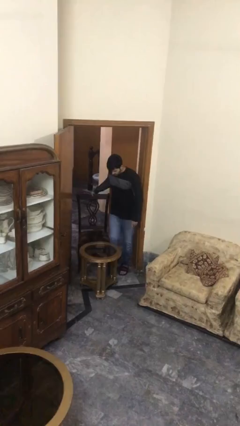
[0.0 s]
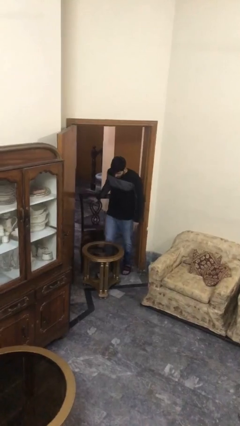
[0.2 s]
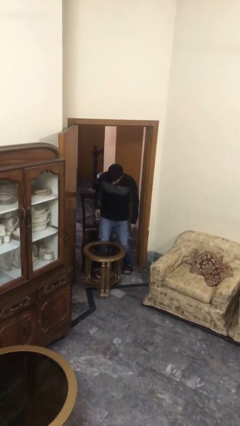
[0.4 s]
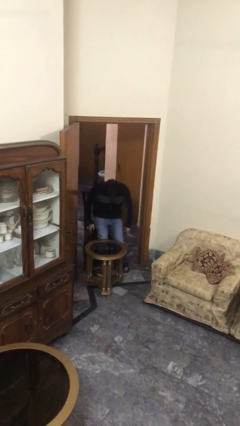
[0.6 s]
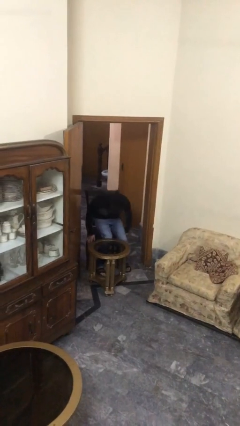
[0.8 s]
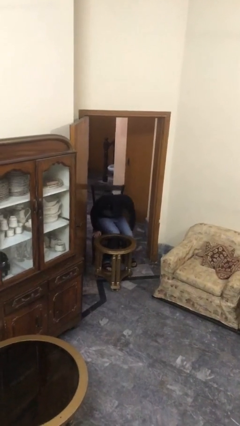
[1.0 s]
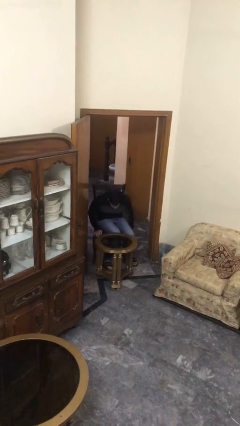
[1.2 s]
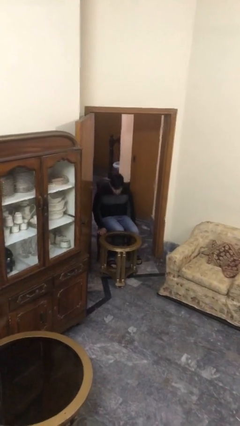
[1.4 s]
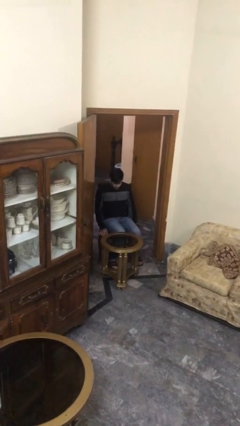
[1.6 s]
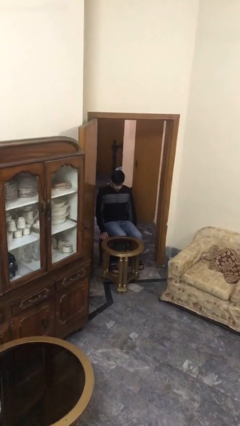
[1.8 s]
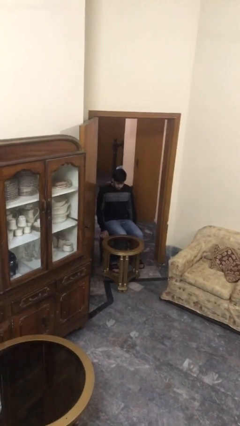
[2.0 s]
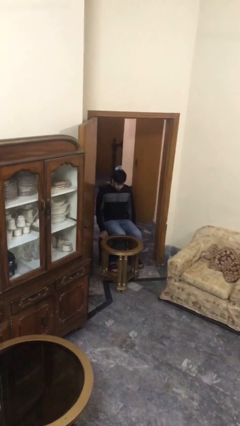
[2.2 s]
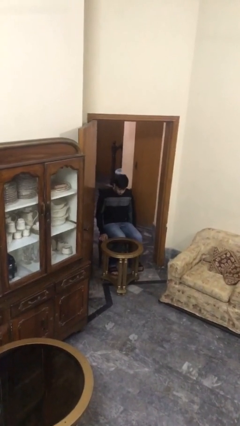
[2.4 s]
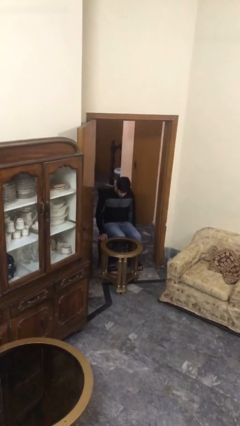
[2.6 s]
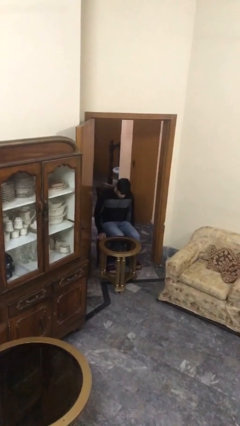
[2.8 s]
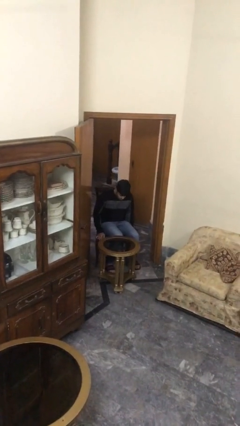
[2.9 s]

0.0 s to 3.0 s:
person sits down

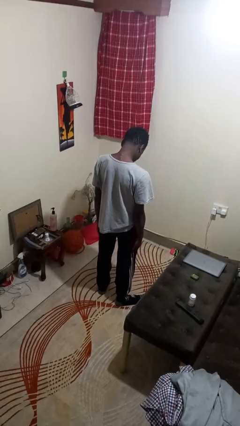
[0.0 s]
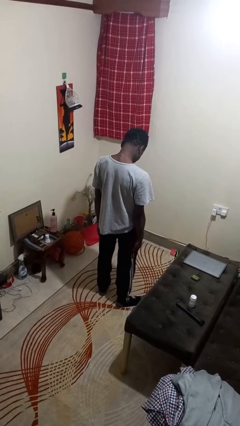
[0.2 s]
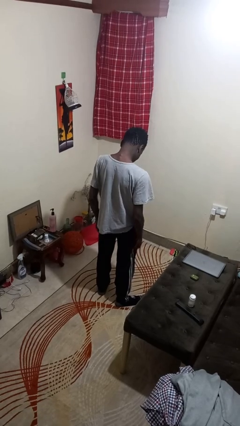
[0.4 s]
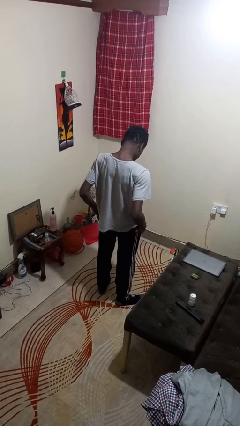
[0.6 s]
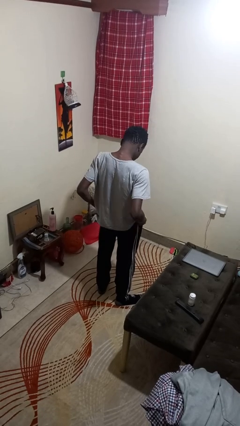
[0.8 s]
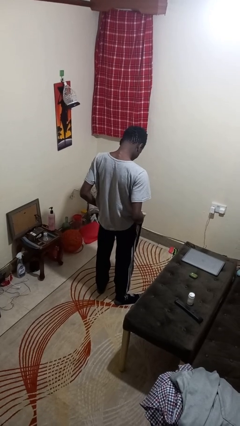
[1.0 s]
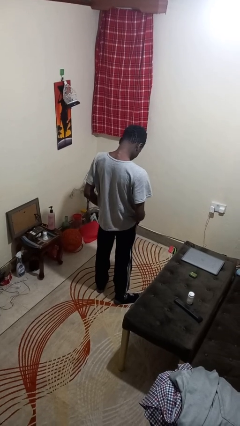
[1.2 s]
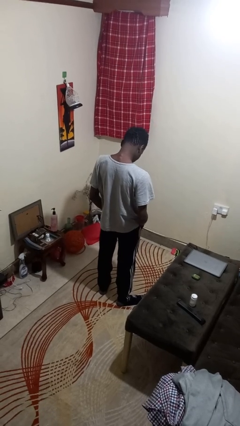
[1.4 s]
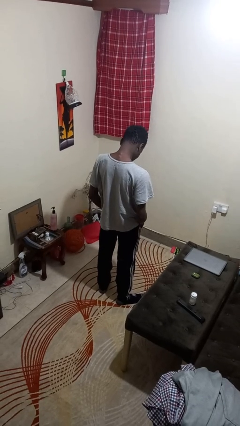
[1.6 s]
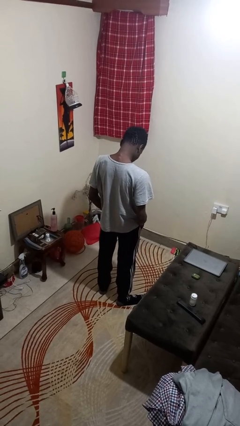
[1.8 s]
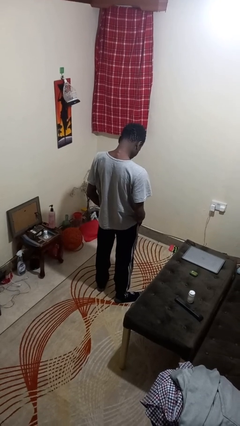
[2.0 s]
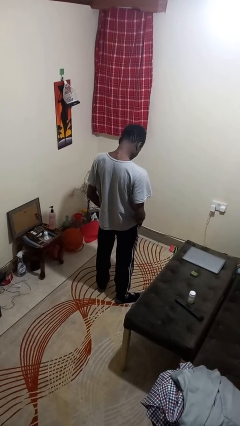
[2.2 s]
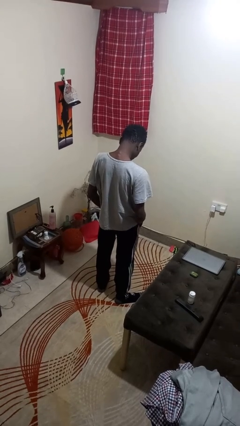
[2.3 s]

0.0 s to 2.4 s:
person puts hands in back pockets

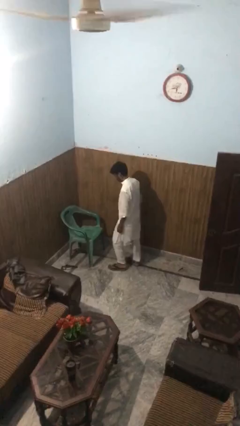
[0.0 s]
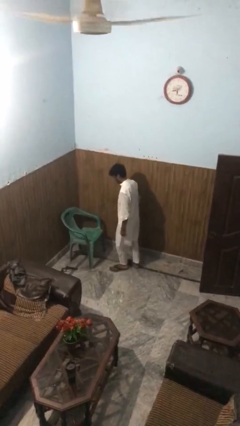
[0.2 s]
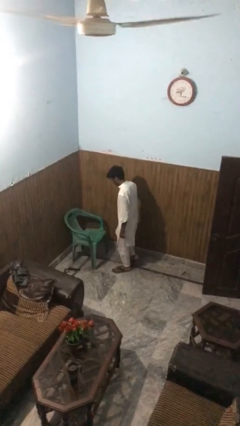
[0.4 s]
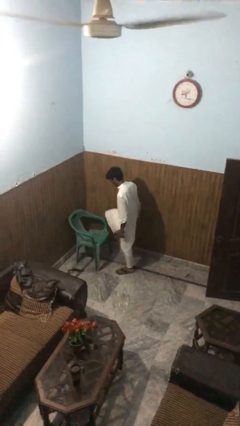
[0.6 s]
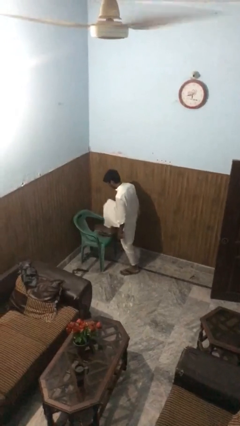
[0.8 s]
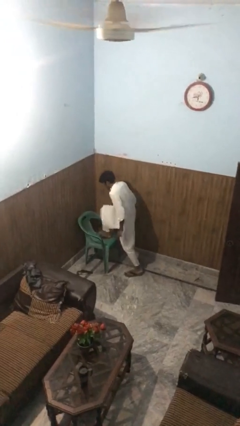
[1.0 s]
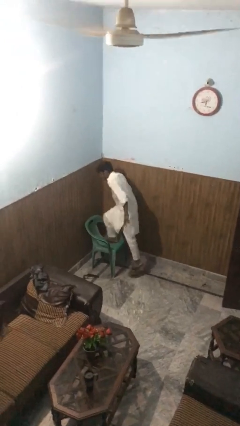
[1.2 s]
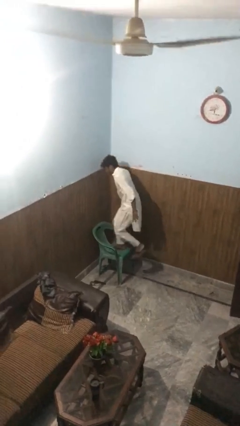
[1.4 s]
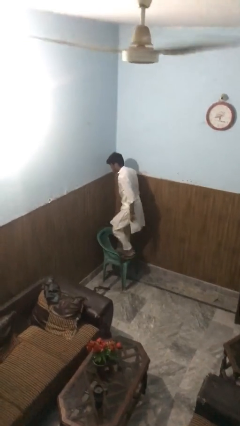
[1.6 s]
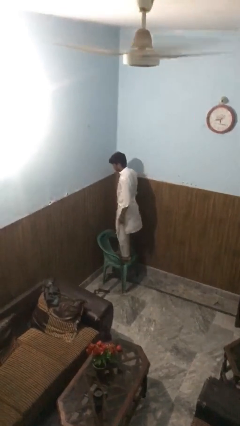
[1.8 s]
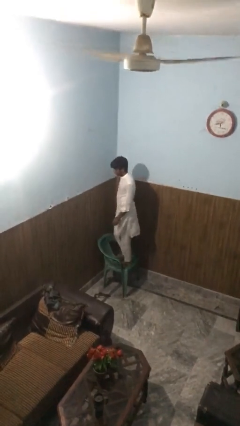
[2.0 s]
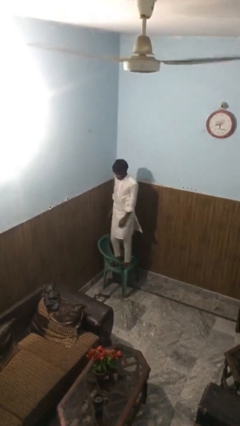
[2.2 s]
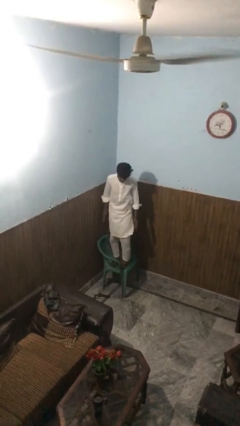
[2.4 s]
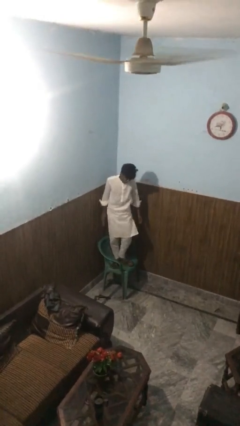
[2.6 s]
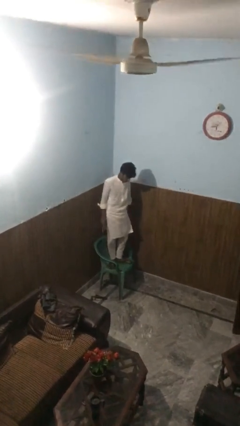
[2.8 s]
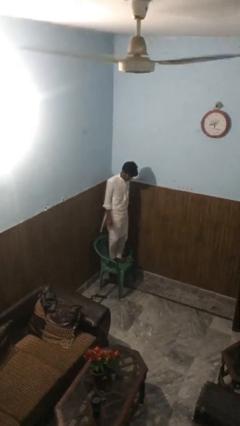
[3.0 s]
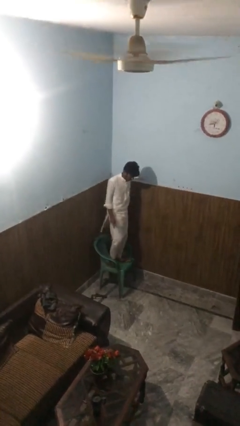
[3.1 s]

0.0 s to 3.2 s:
person climbs on chair

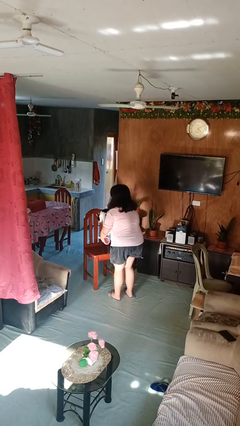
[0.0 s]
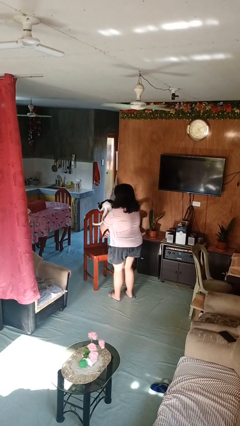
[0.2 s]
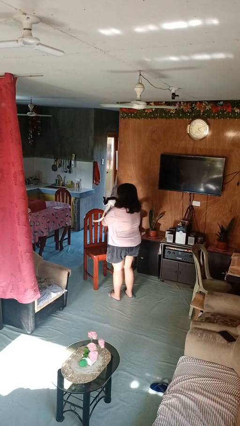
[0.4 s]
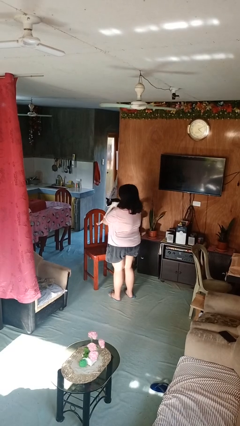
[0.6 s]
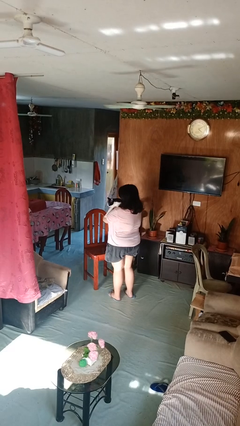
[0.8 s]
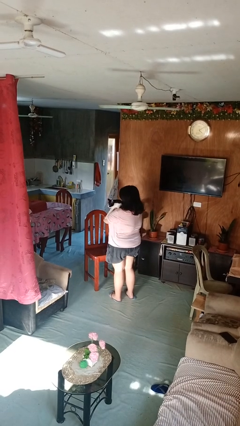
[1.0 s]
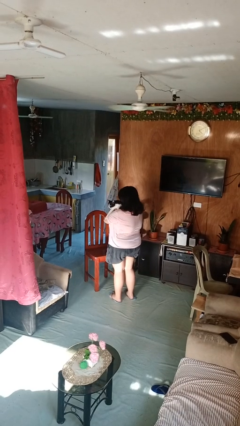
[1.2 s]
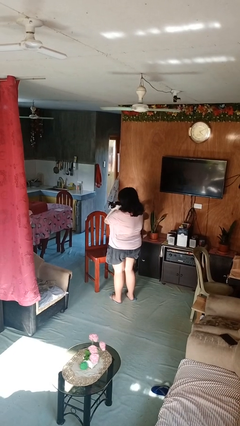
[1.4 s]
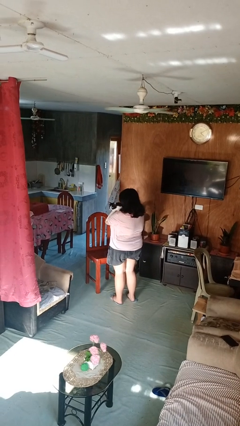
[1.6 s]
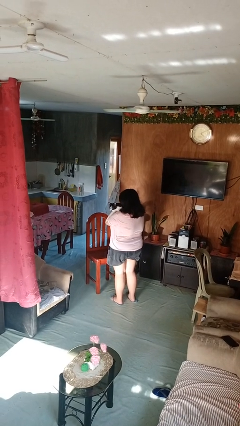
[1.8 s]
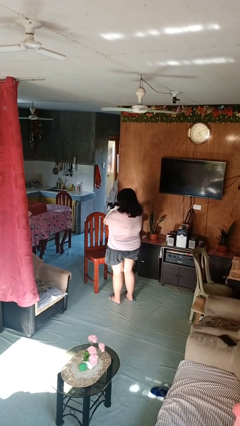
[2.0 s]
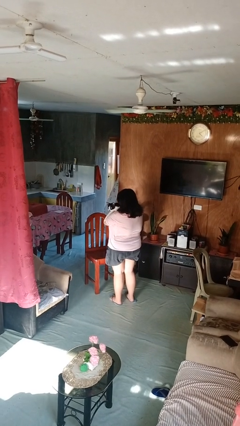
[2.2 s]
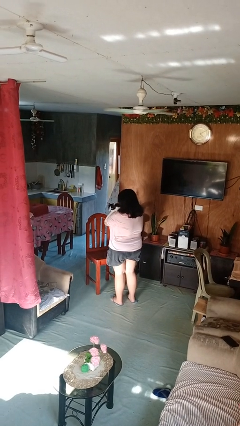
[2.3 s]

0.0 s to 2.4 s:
person hugs cat

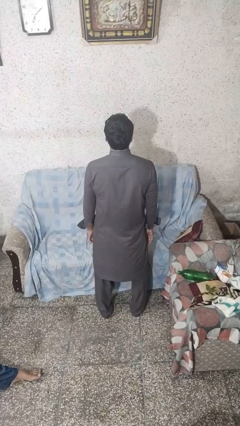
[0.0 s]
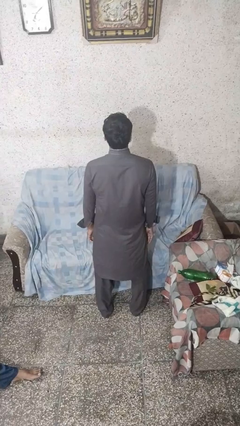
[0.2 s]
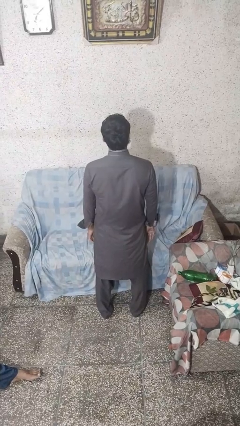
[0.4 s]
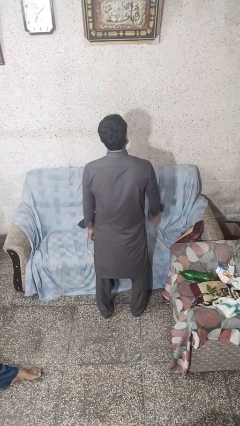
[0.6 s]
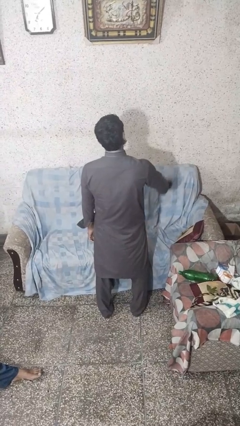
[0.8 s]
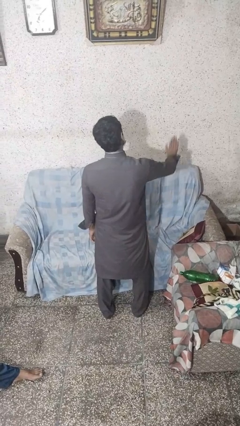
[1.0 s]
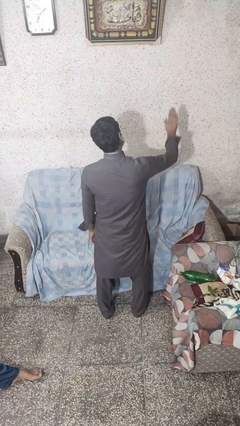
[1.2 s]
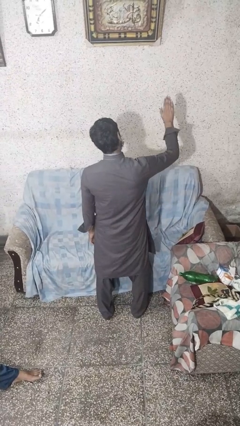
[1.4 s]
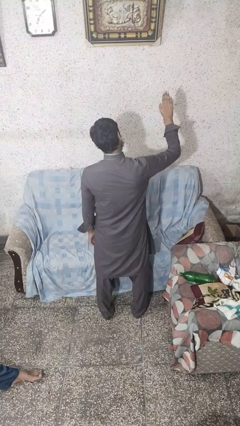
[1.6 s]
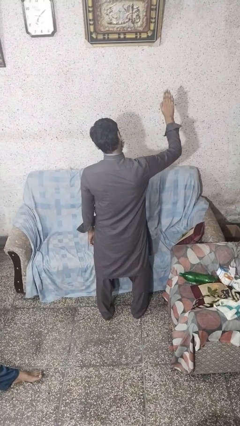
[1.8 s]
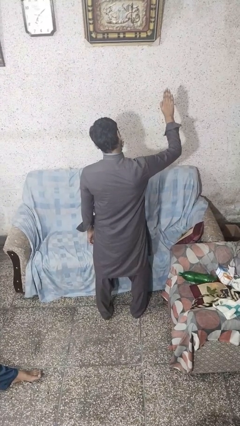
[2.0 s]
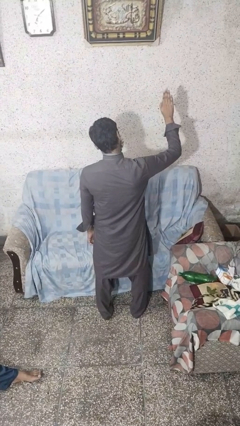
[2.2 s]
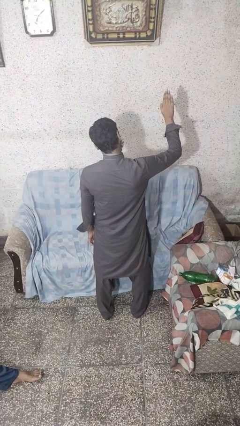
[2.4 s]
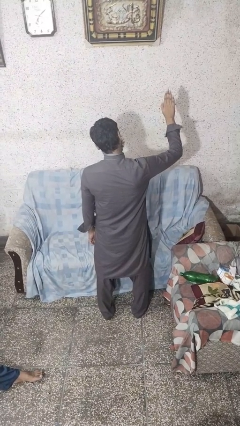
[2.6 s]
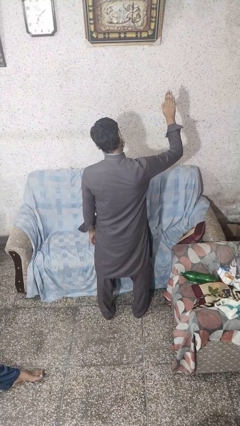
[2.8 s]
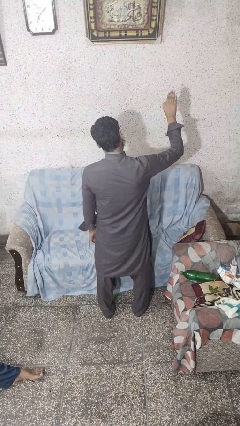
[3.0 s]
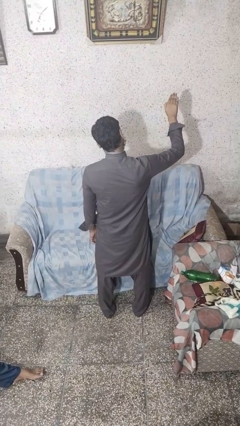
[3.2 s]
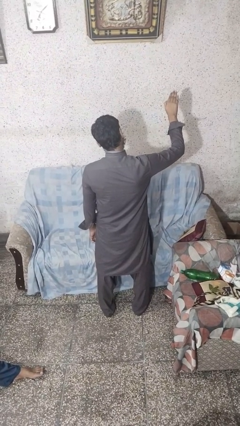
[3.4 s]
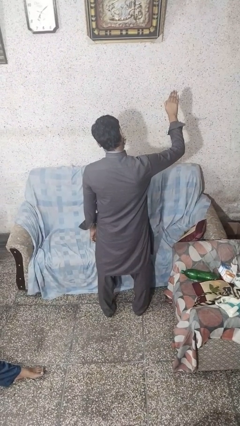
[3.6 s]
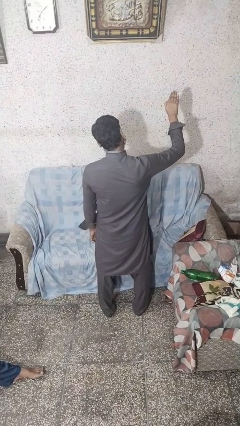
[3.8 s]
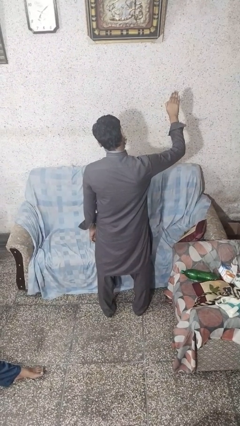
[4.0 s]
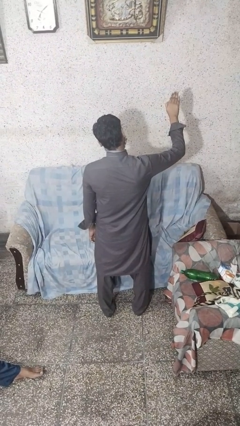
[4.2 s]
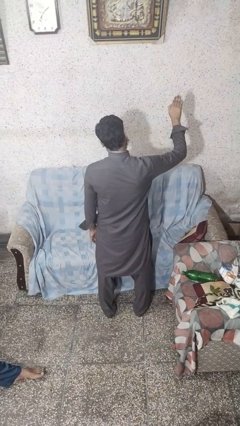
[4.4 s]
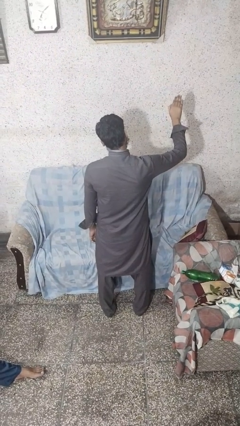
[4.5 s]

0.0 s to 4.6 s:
person gestures stop

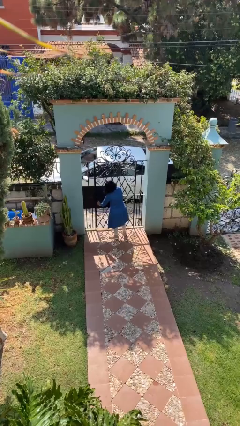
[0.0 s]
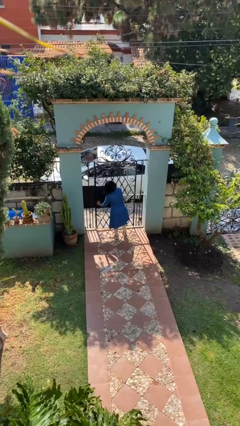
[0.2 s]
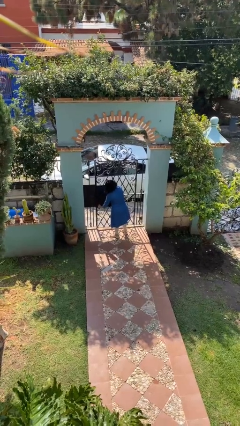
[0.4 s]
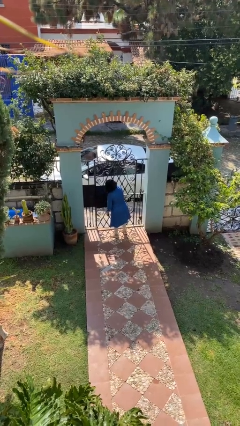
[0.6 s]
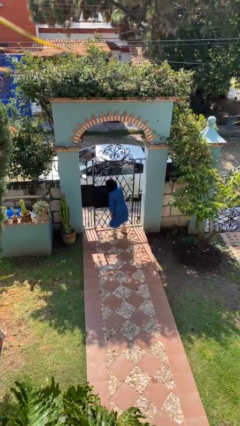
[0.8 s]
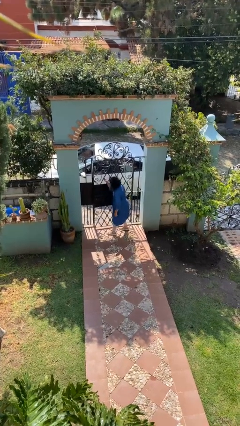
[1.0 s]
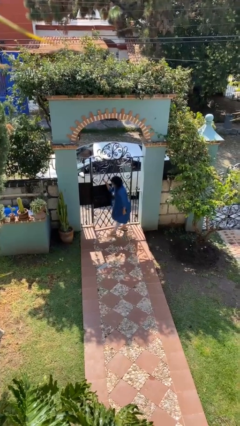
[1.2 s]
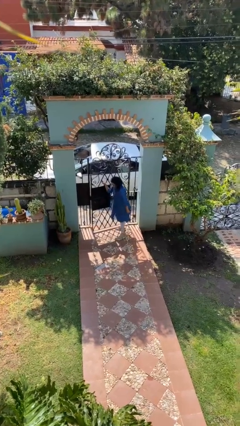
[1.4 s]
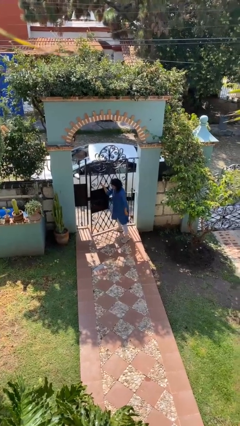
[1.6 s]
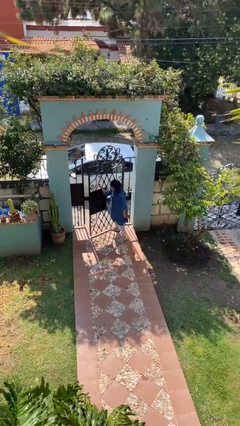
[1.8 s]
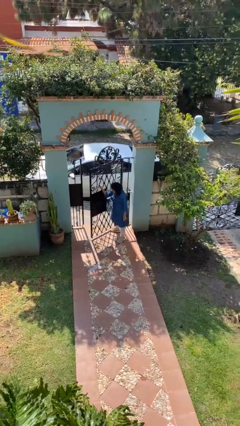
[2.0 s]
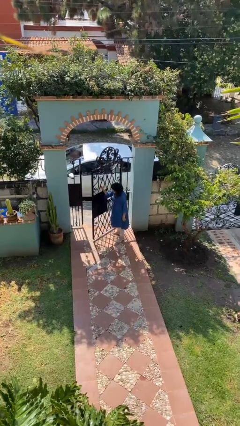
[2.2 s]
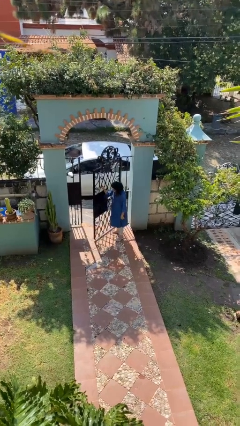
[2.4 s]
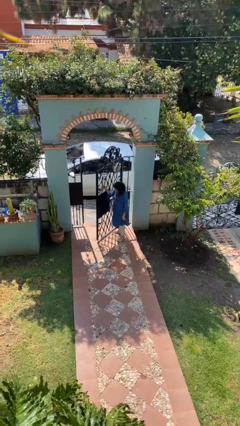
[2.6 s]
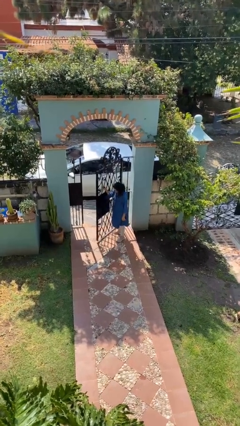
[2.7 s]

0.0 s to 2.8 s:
person opens facility door
